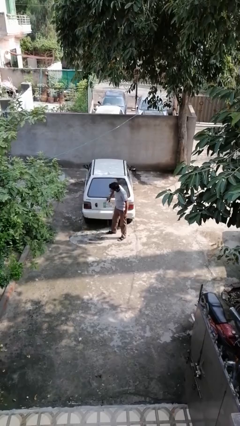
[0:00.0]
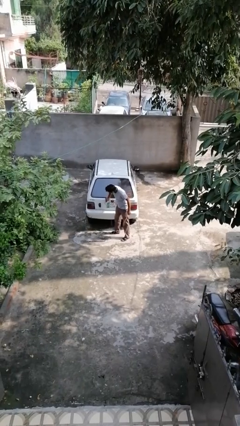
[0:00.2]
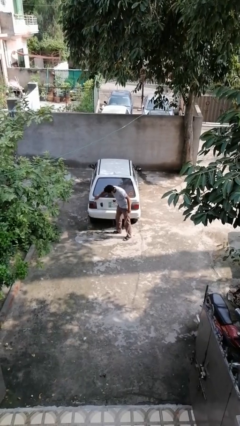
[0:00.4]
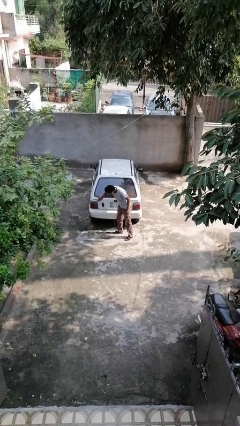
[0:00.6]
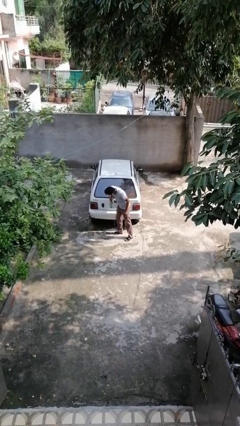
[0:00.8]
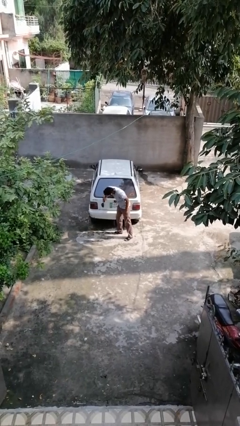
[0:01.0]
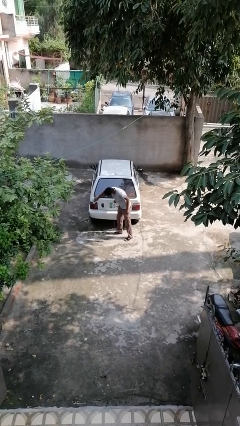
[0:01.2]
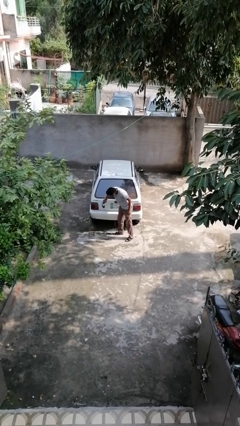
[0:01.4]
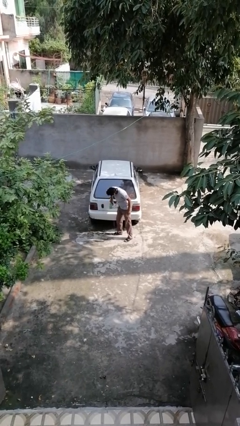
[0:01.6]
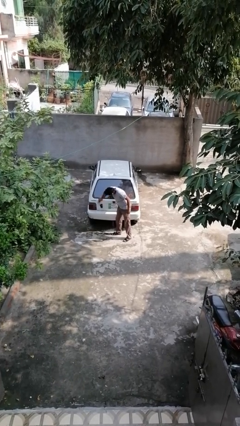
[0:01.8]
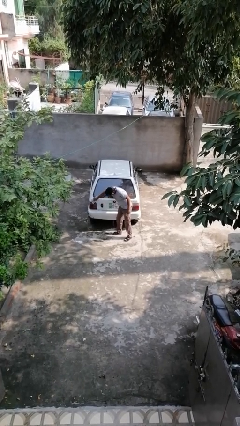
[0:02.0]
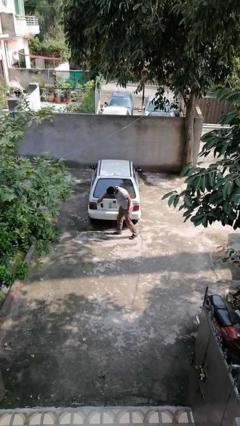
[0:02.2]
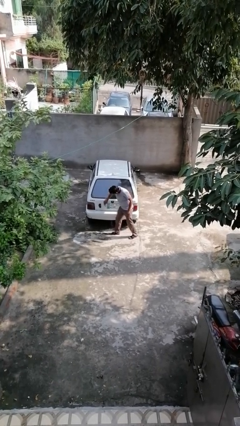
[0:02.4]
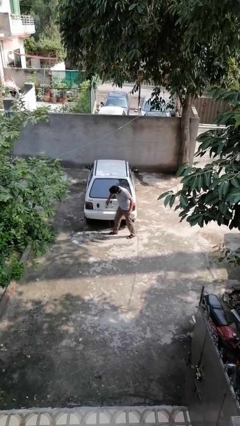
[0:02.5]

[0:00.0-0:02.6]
person polishes car with rag

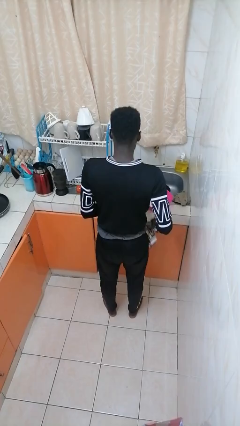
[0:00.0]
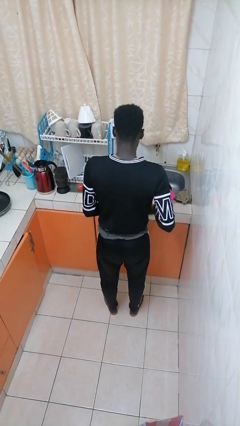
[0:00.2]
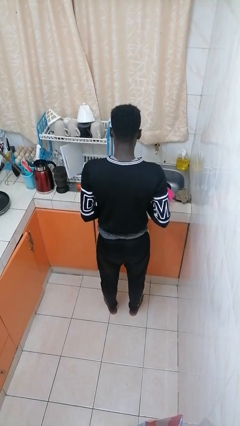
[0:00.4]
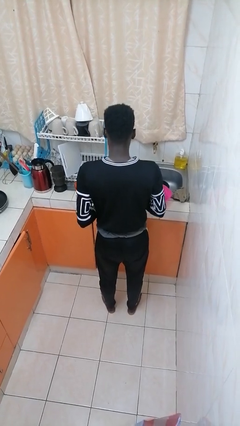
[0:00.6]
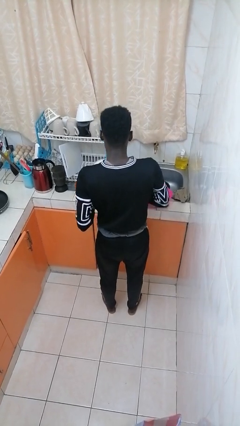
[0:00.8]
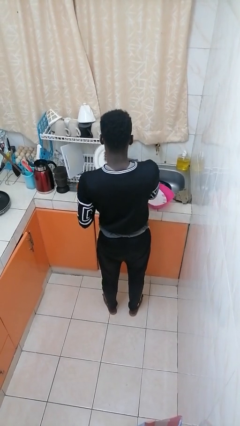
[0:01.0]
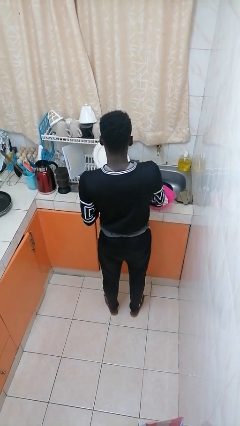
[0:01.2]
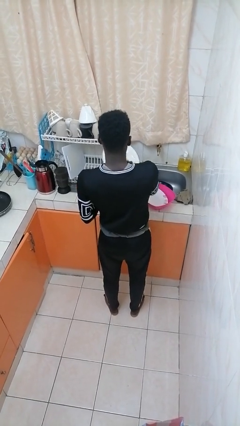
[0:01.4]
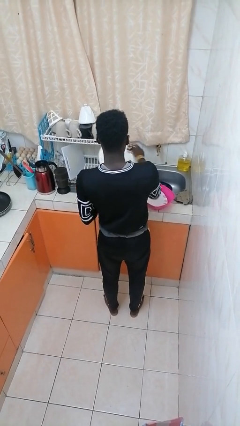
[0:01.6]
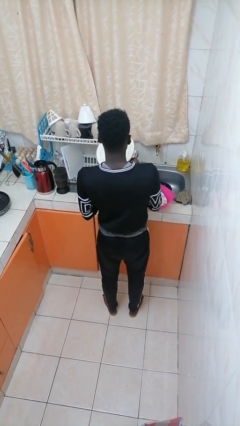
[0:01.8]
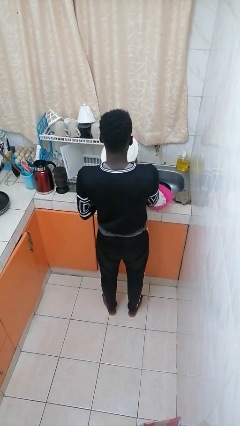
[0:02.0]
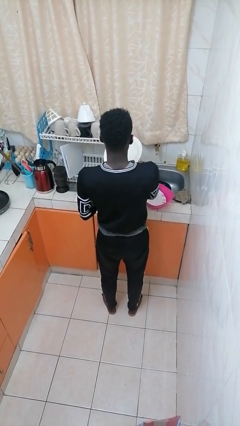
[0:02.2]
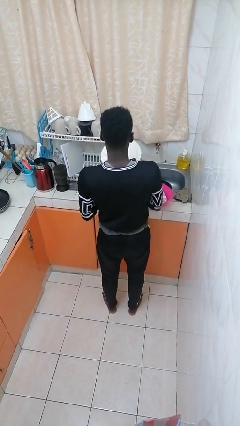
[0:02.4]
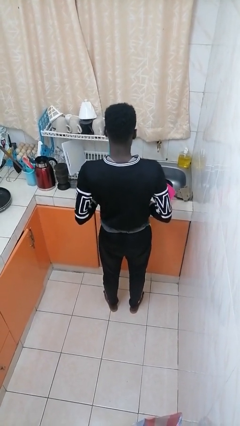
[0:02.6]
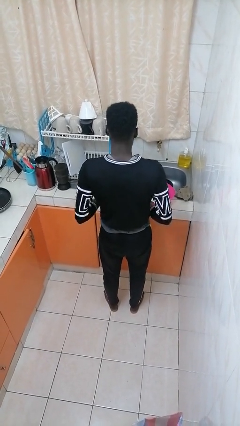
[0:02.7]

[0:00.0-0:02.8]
person dries dish

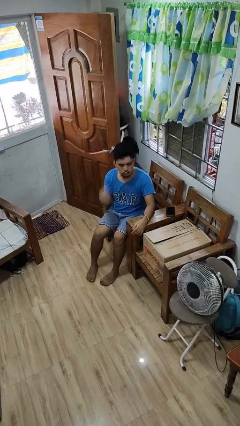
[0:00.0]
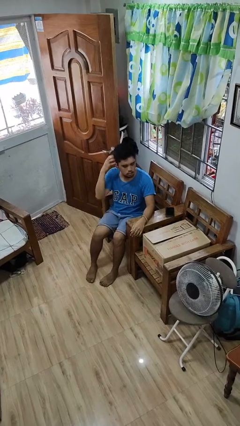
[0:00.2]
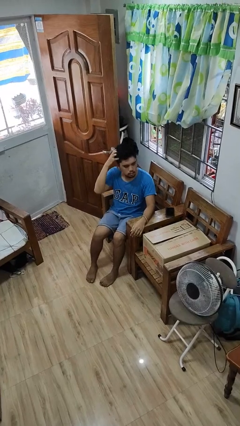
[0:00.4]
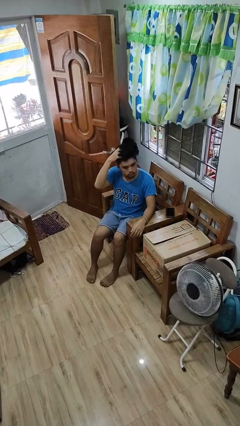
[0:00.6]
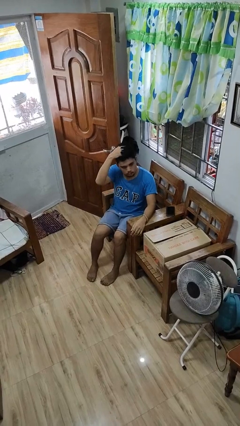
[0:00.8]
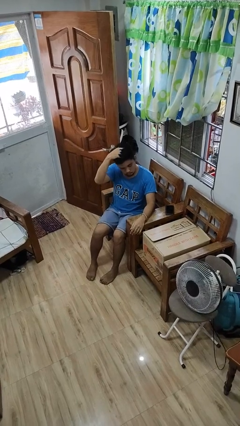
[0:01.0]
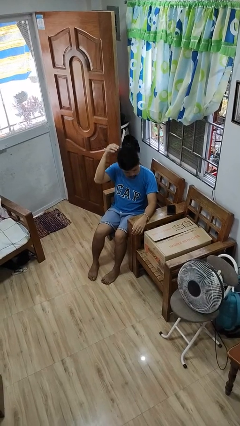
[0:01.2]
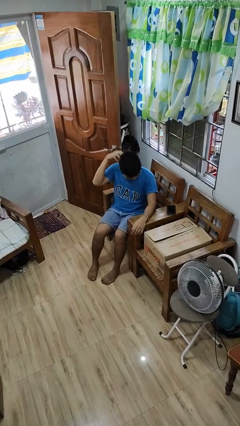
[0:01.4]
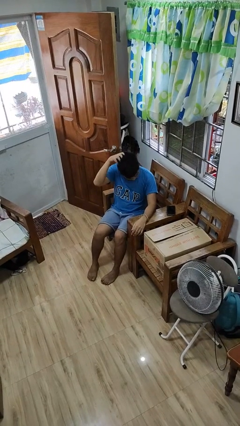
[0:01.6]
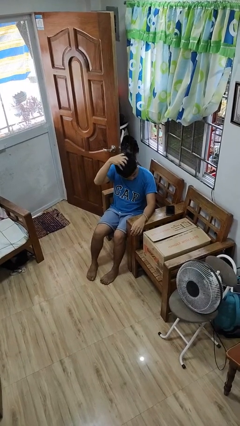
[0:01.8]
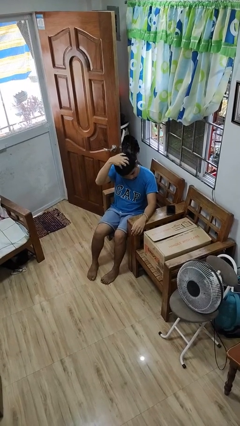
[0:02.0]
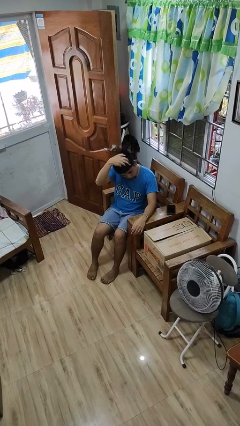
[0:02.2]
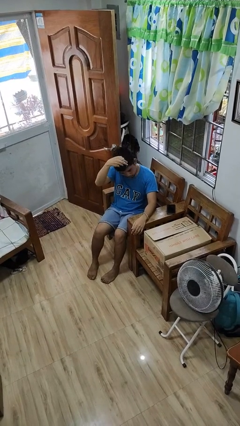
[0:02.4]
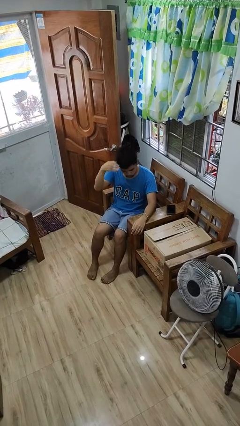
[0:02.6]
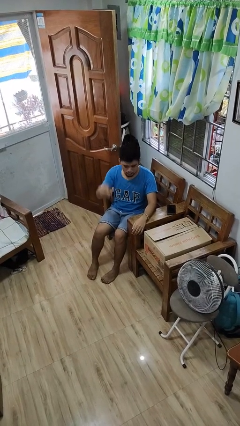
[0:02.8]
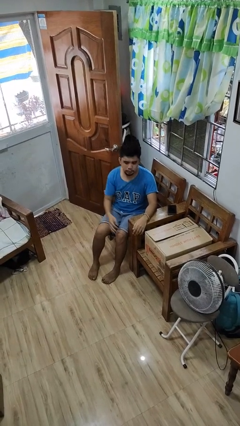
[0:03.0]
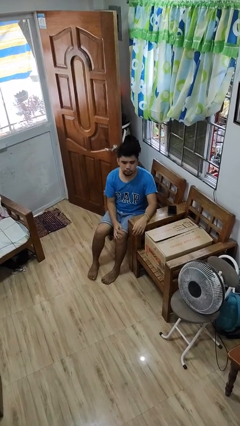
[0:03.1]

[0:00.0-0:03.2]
person strokes hair

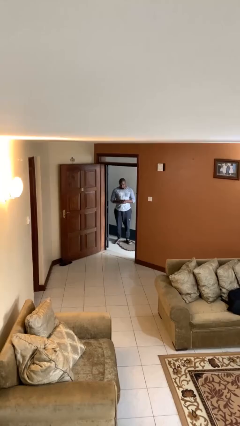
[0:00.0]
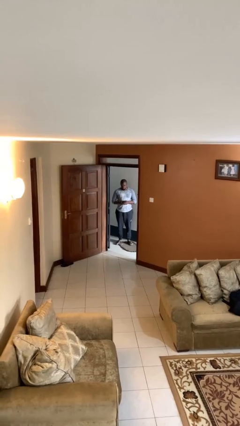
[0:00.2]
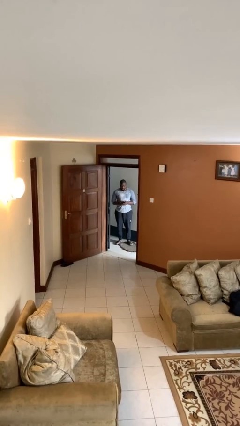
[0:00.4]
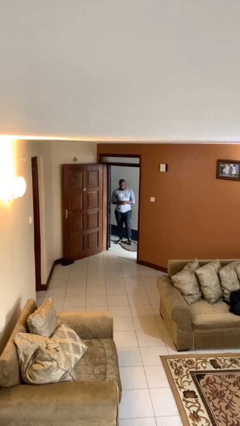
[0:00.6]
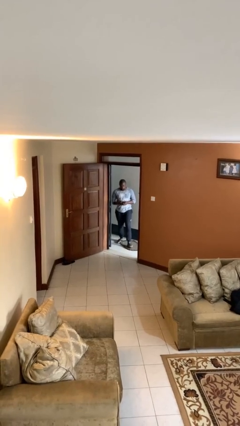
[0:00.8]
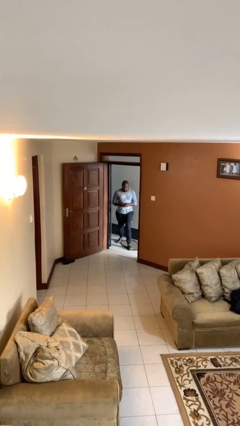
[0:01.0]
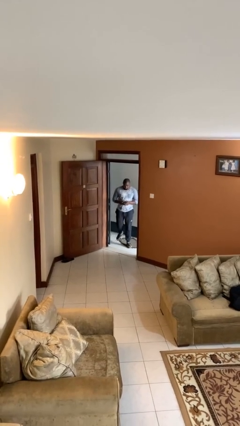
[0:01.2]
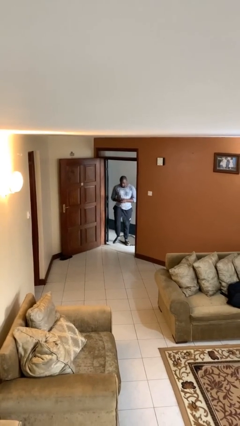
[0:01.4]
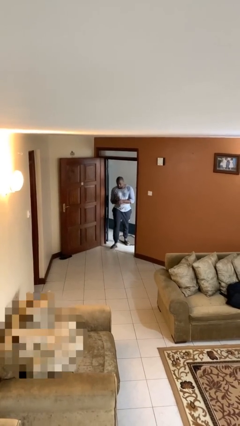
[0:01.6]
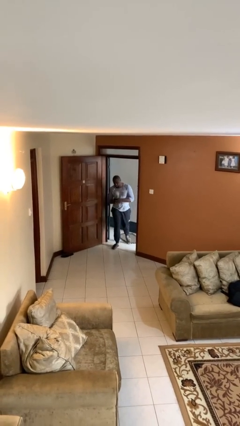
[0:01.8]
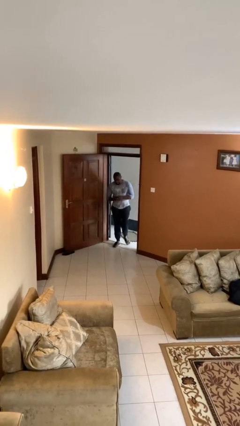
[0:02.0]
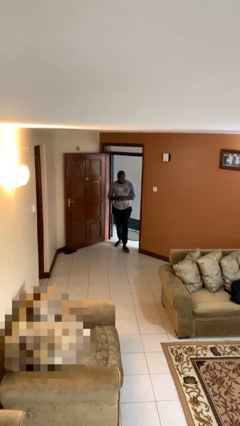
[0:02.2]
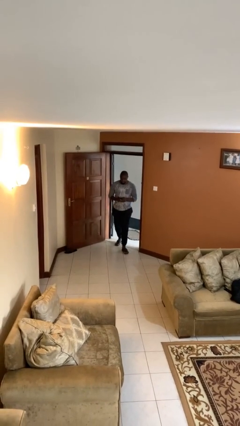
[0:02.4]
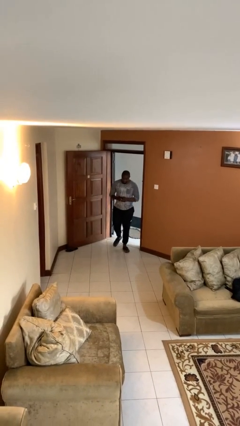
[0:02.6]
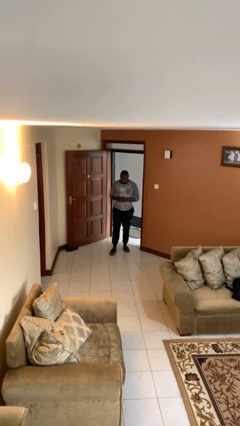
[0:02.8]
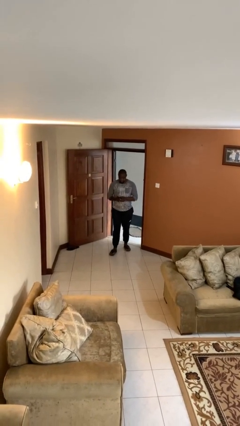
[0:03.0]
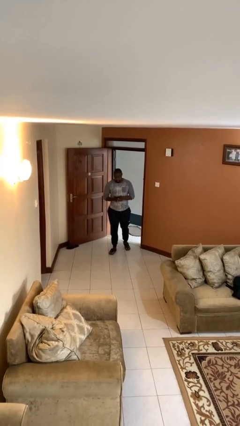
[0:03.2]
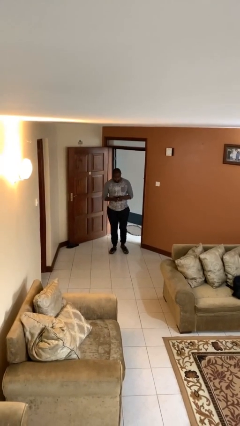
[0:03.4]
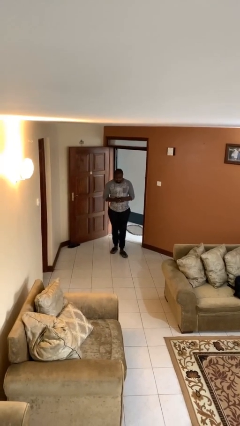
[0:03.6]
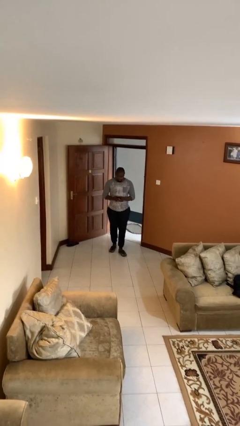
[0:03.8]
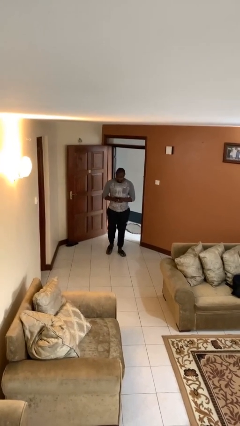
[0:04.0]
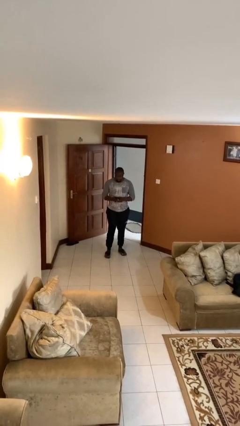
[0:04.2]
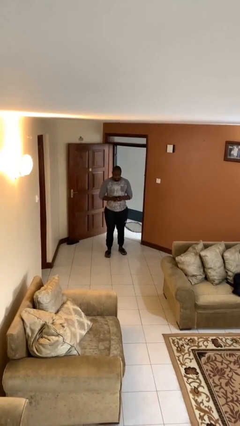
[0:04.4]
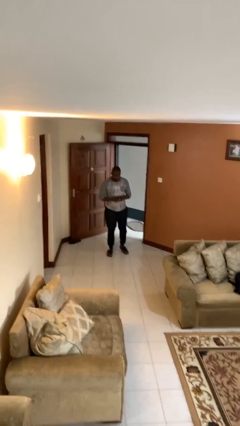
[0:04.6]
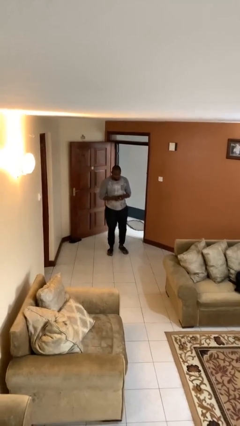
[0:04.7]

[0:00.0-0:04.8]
person enters scene through structure

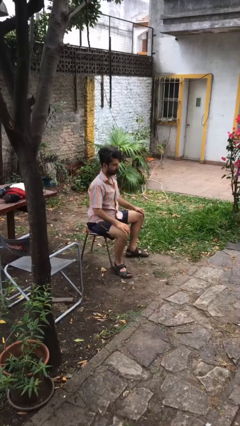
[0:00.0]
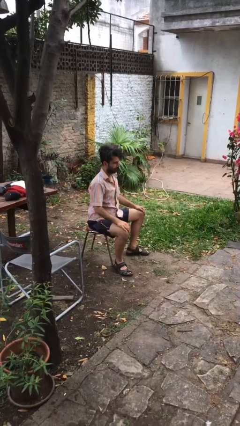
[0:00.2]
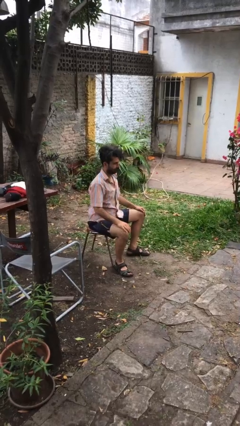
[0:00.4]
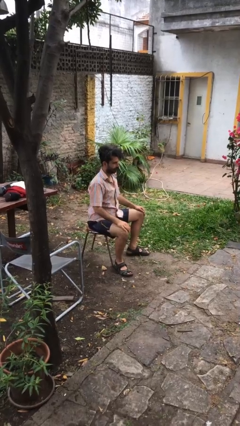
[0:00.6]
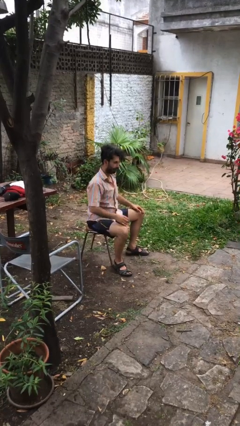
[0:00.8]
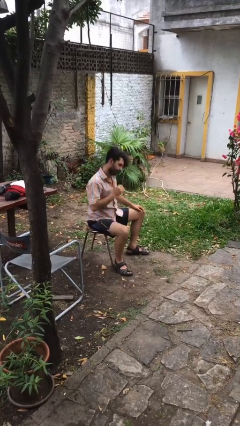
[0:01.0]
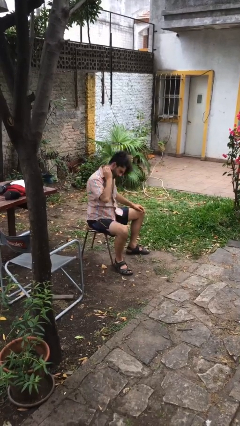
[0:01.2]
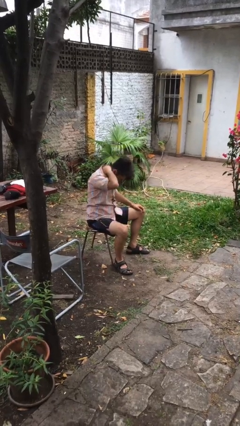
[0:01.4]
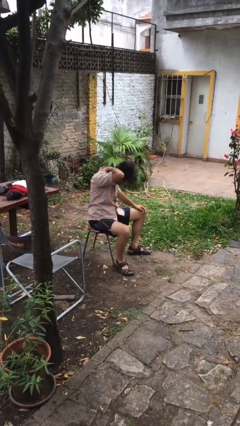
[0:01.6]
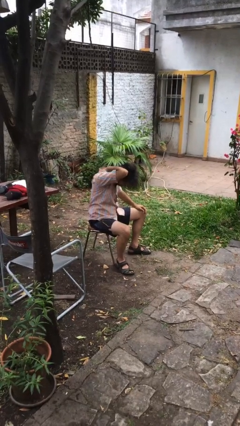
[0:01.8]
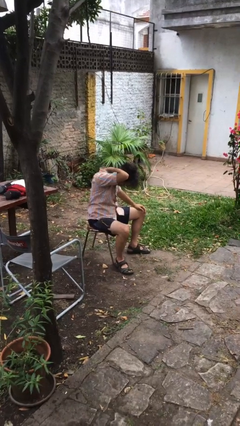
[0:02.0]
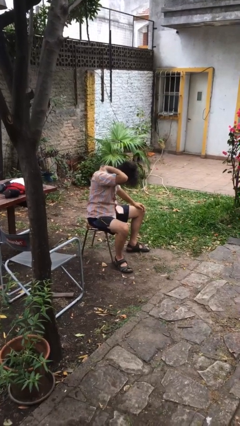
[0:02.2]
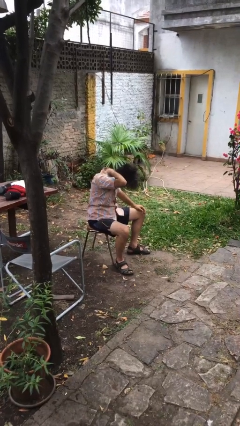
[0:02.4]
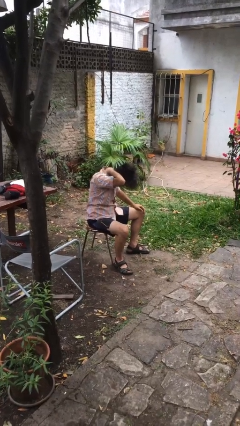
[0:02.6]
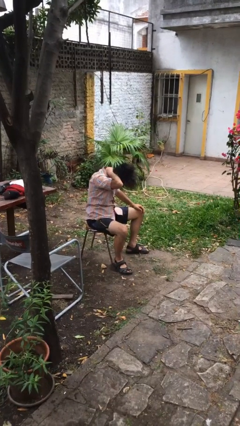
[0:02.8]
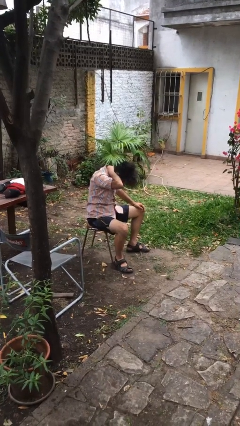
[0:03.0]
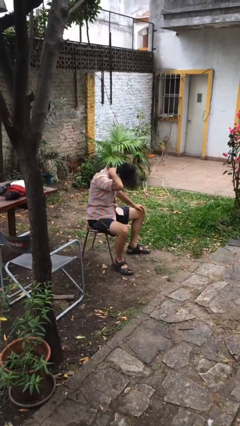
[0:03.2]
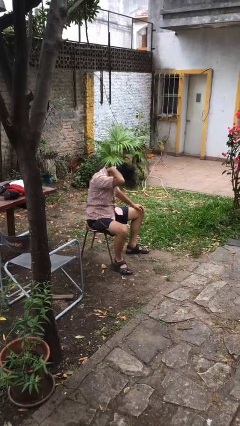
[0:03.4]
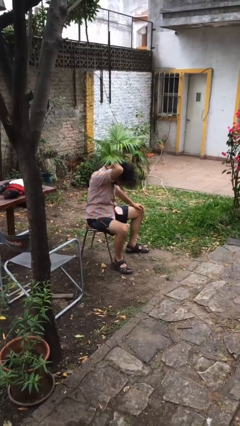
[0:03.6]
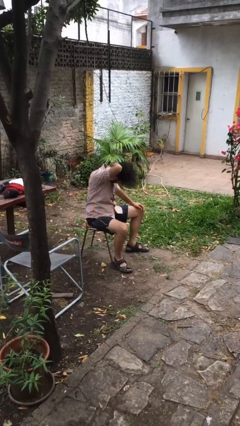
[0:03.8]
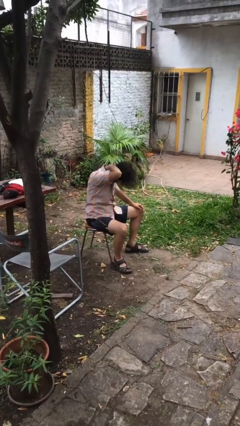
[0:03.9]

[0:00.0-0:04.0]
person rubs neck

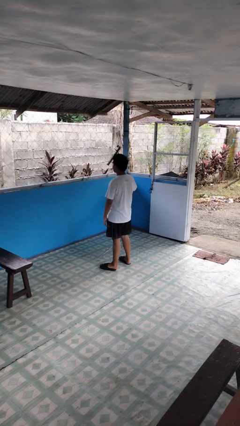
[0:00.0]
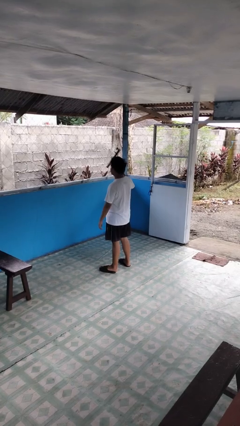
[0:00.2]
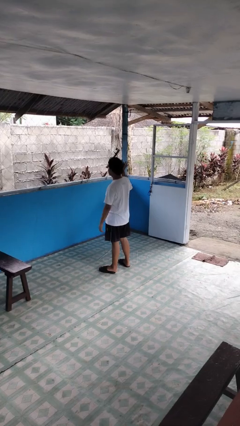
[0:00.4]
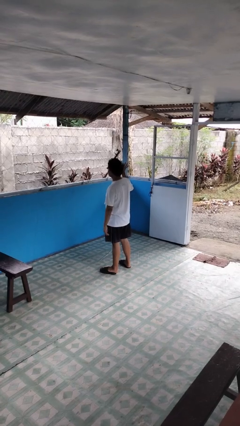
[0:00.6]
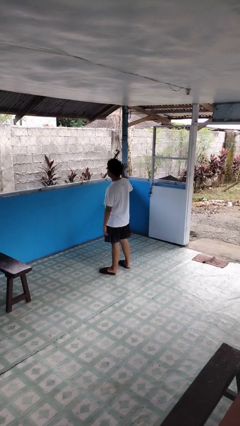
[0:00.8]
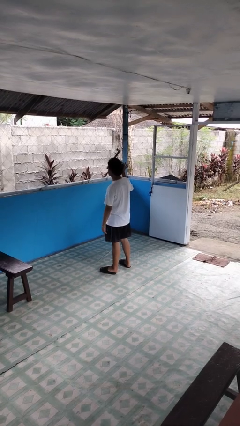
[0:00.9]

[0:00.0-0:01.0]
person gestures number five
